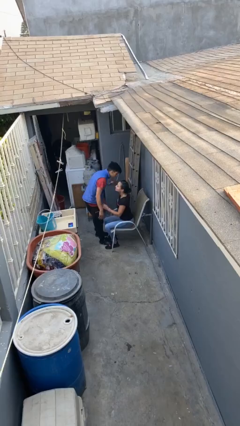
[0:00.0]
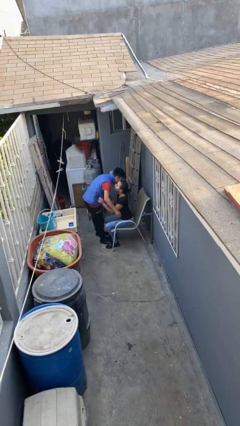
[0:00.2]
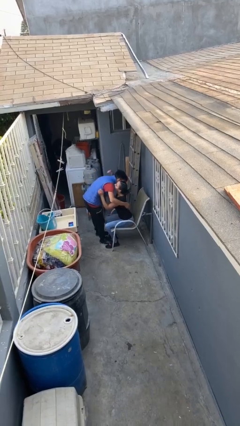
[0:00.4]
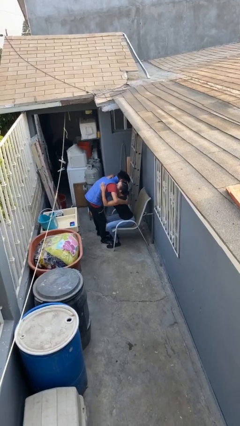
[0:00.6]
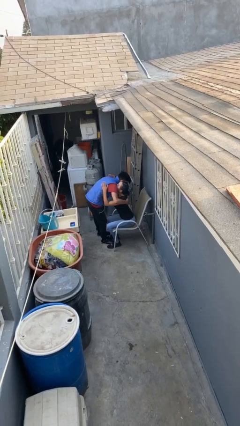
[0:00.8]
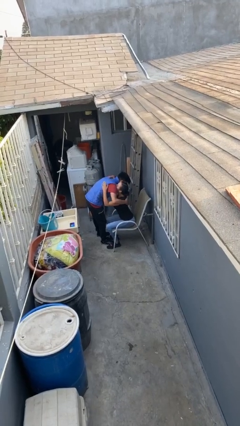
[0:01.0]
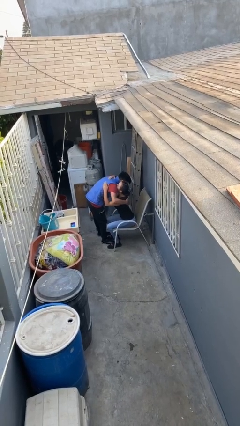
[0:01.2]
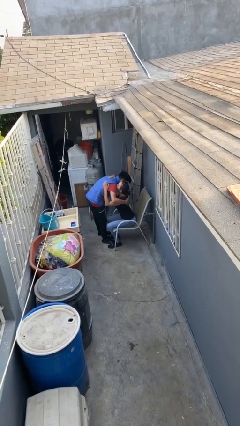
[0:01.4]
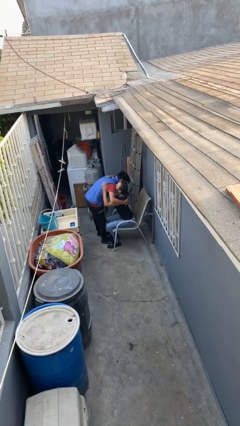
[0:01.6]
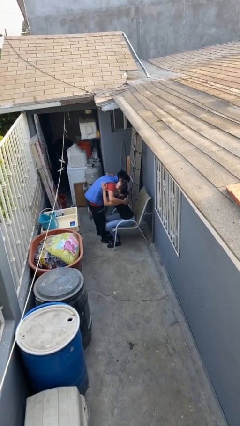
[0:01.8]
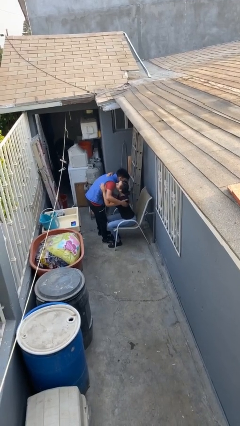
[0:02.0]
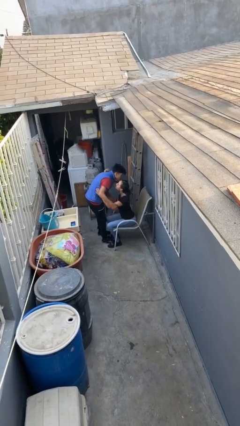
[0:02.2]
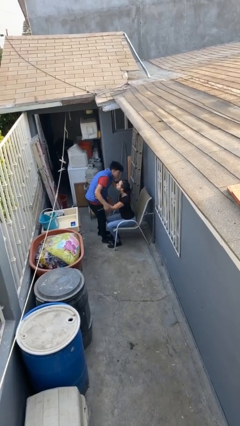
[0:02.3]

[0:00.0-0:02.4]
person embraces person

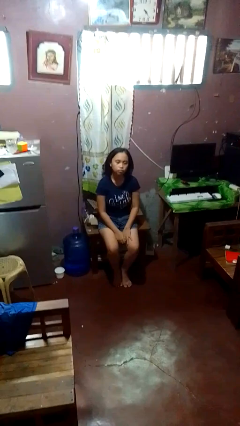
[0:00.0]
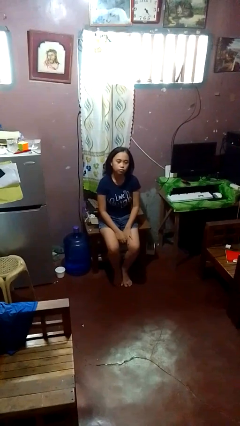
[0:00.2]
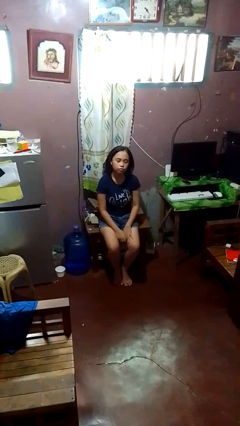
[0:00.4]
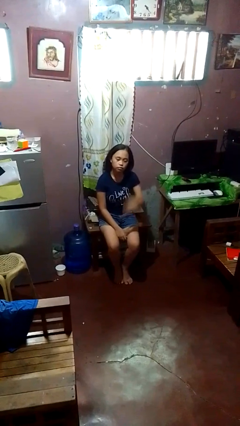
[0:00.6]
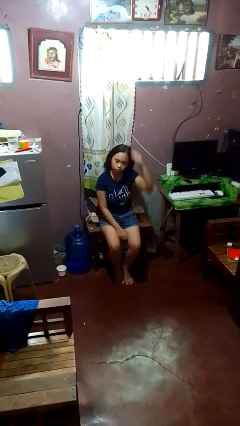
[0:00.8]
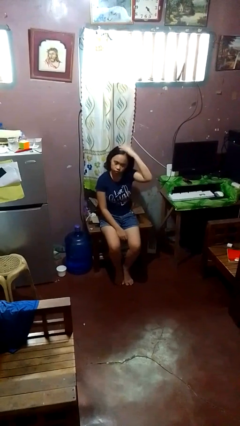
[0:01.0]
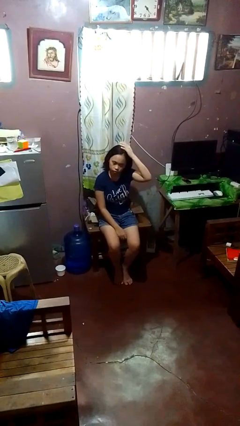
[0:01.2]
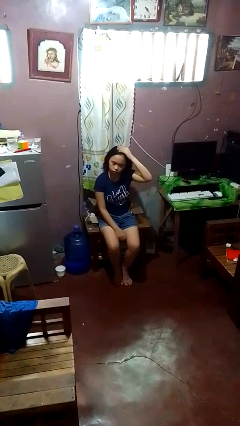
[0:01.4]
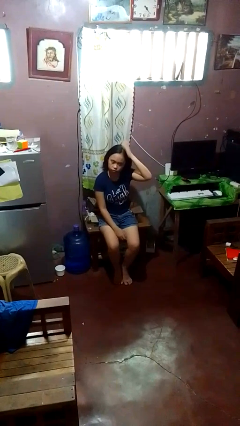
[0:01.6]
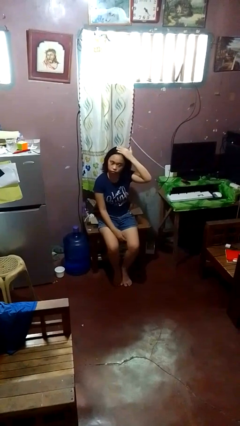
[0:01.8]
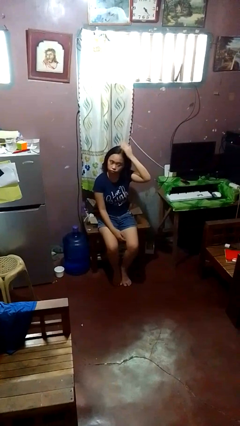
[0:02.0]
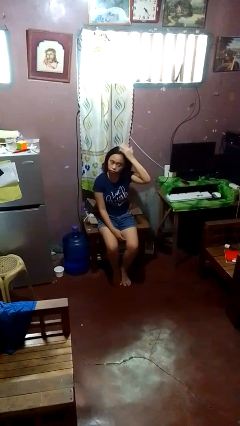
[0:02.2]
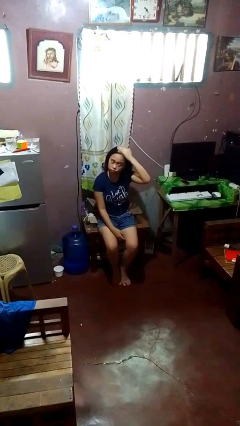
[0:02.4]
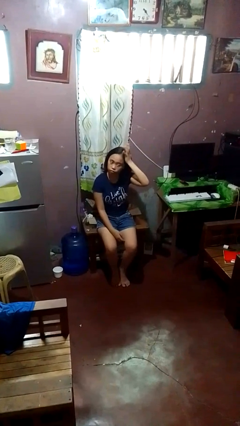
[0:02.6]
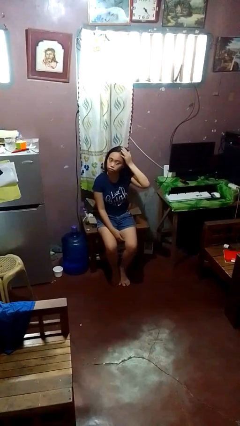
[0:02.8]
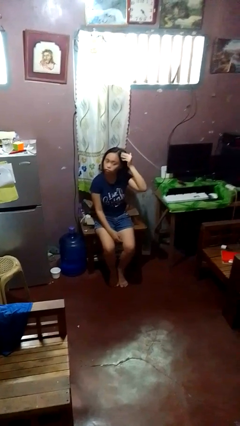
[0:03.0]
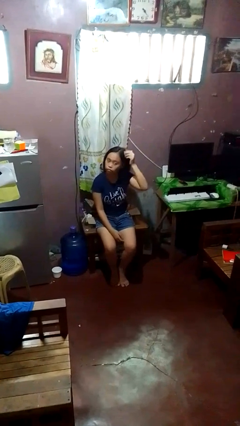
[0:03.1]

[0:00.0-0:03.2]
person pats head

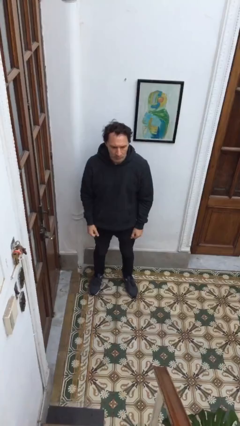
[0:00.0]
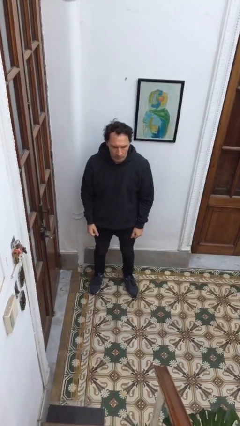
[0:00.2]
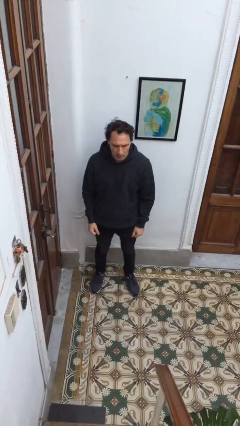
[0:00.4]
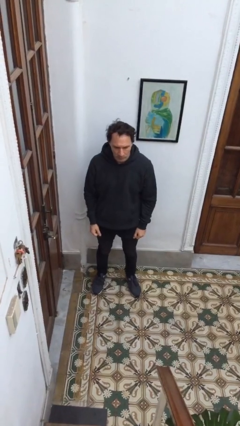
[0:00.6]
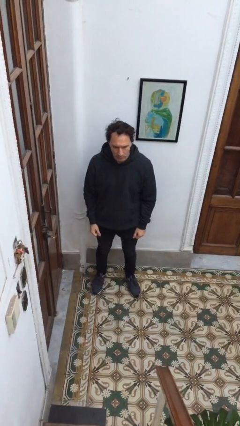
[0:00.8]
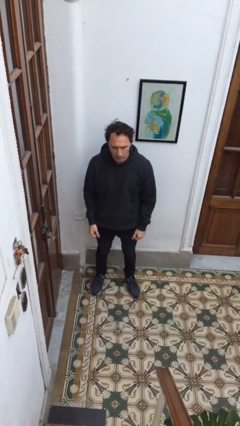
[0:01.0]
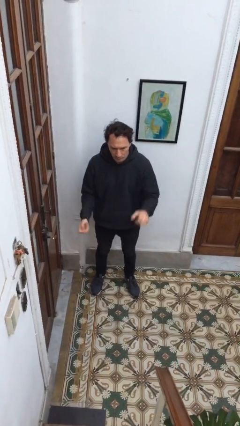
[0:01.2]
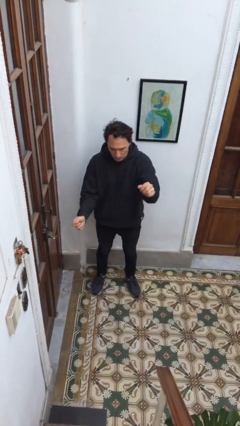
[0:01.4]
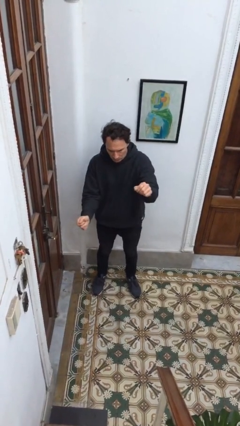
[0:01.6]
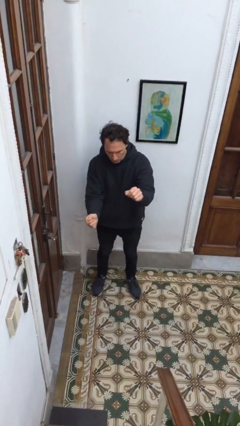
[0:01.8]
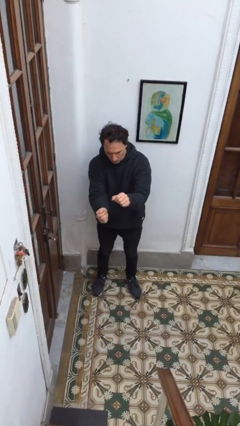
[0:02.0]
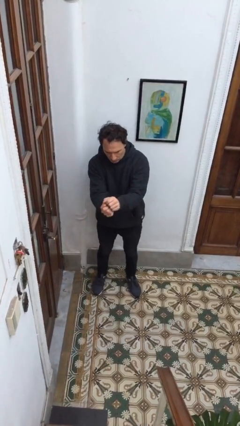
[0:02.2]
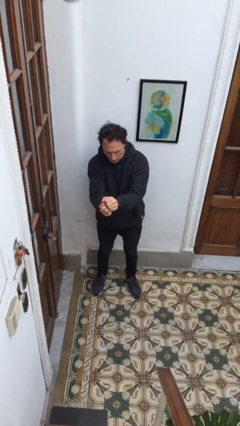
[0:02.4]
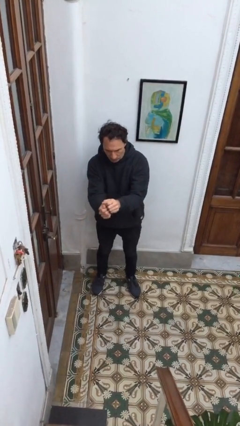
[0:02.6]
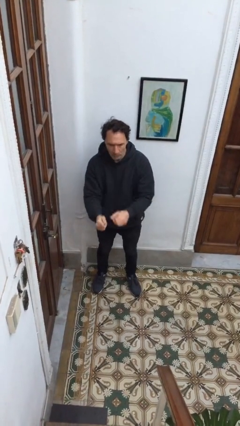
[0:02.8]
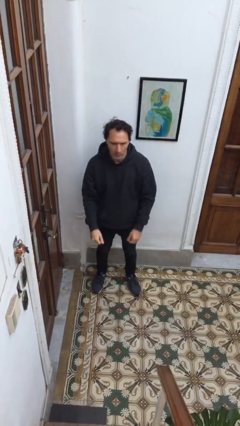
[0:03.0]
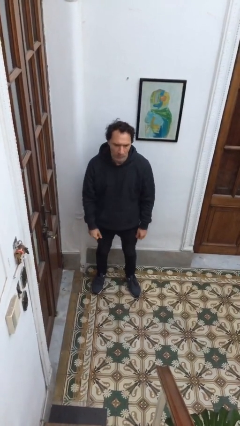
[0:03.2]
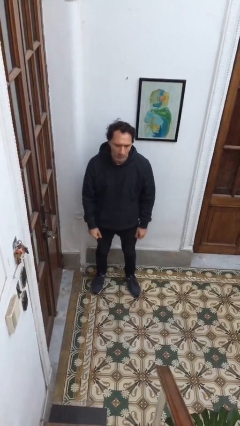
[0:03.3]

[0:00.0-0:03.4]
person gestures zoom out

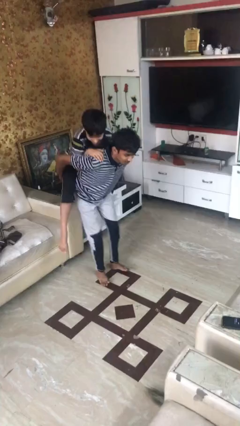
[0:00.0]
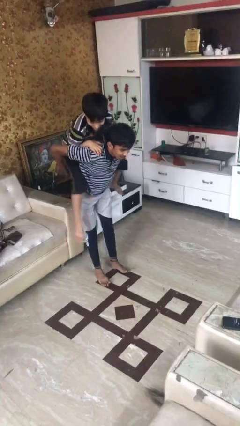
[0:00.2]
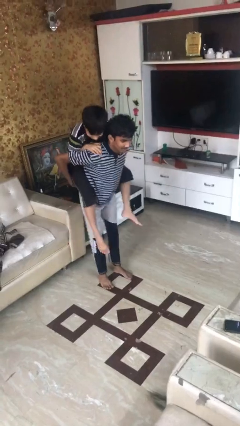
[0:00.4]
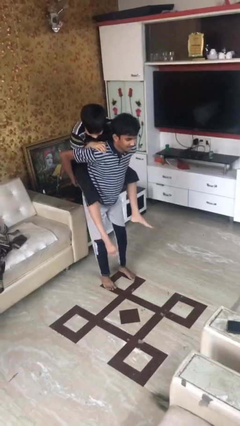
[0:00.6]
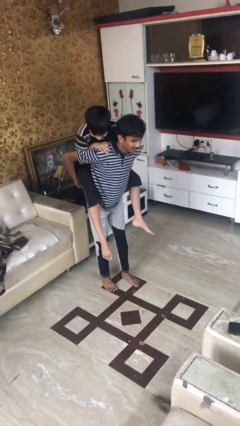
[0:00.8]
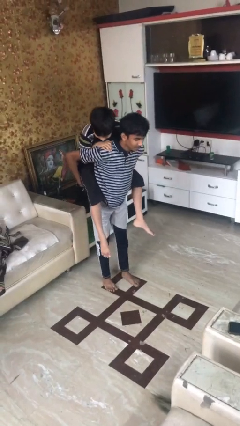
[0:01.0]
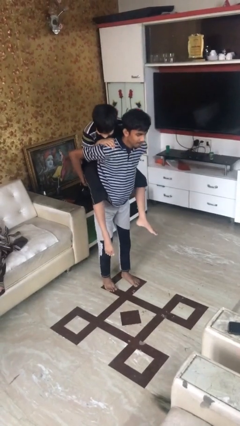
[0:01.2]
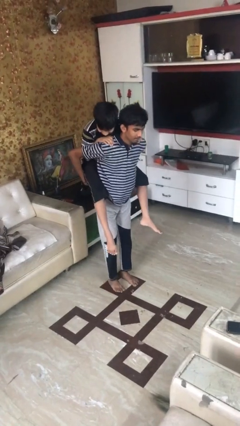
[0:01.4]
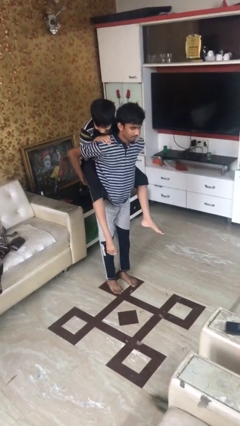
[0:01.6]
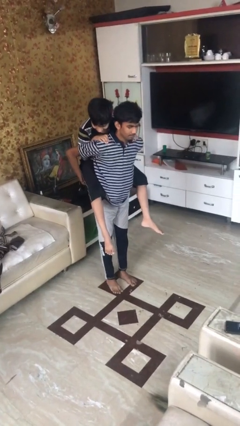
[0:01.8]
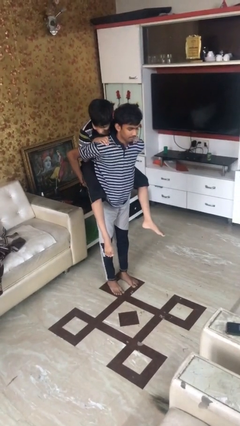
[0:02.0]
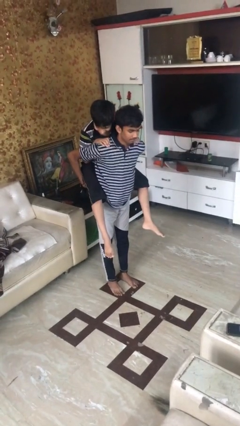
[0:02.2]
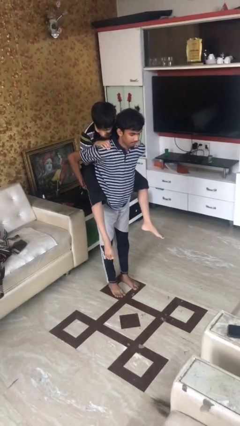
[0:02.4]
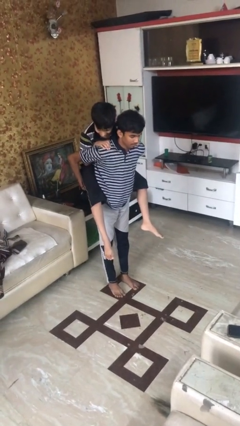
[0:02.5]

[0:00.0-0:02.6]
person carries person over shoulder

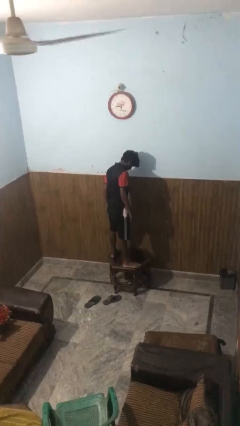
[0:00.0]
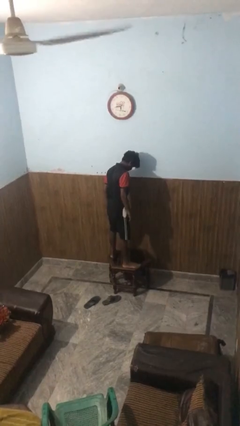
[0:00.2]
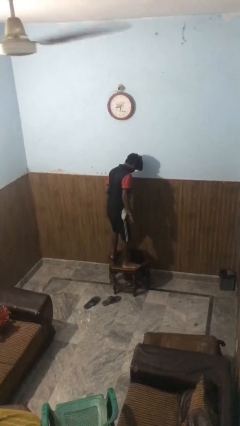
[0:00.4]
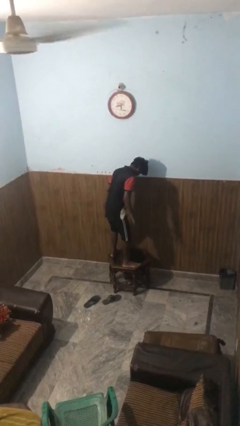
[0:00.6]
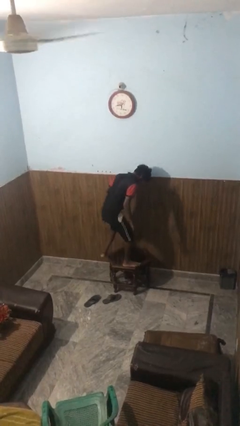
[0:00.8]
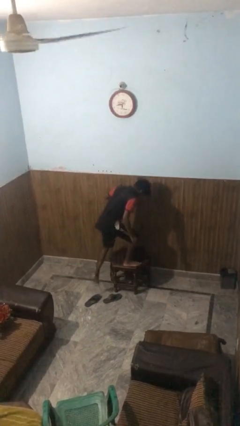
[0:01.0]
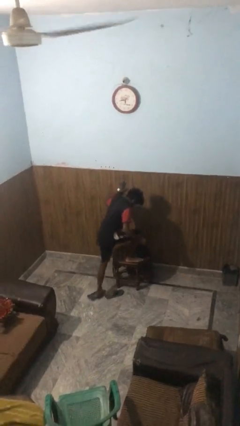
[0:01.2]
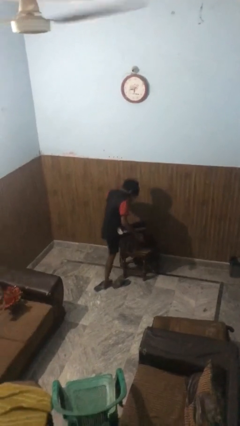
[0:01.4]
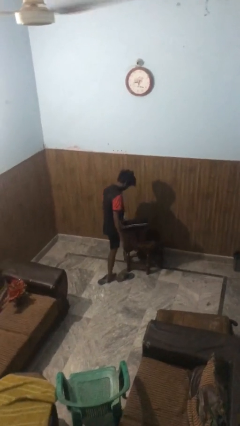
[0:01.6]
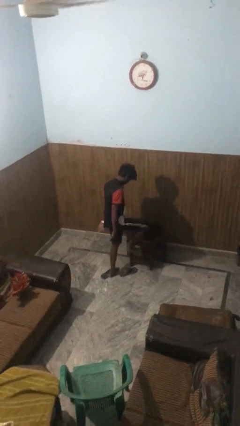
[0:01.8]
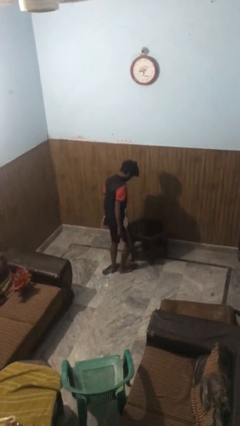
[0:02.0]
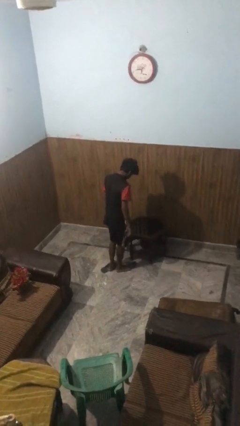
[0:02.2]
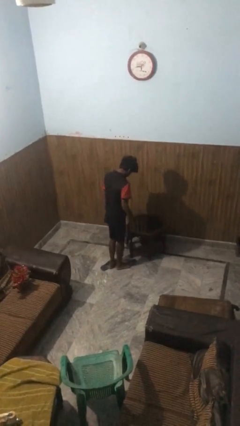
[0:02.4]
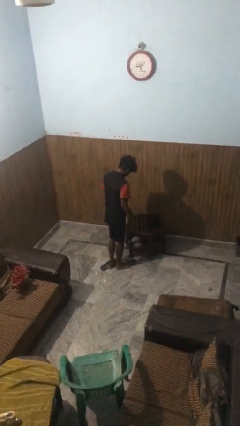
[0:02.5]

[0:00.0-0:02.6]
person climbs off table

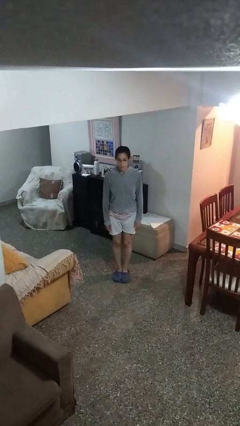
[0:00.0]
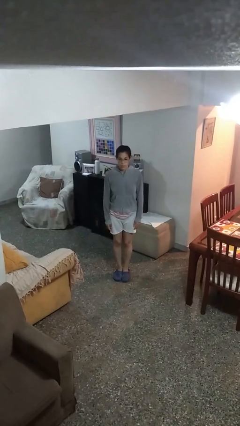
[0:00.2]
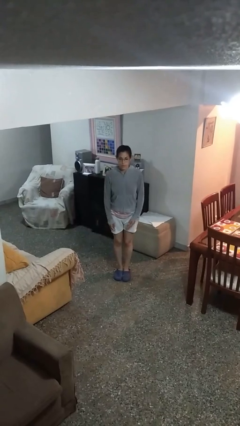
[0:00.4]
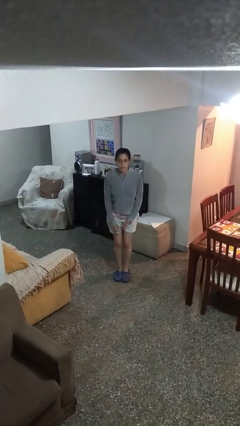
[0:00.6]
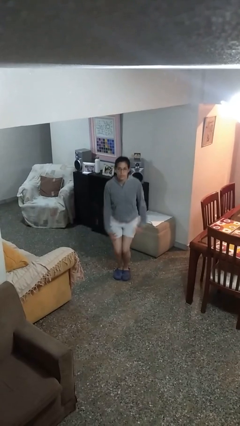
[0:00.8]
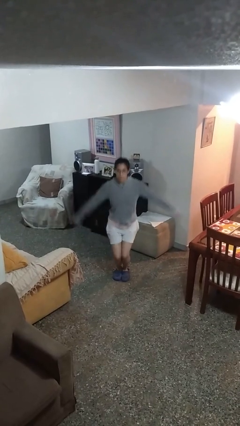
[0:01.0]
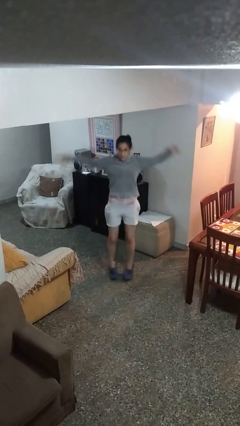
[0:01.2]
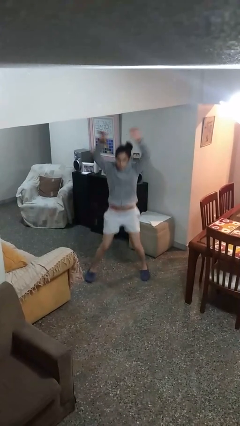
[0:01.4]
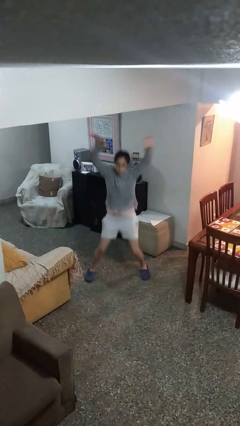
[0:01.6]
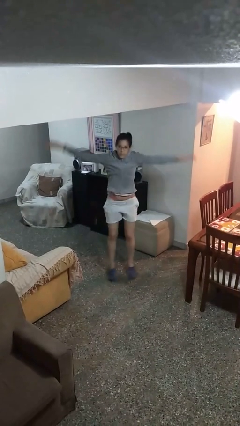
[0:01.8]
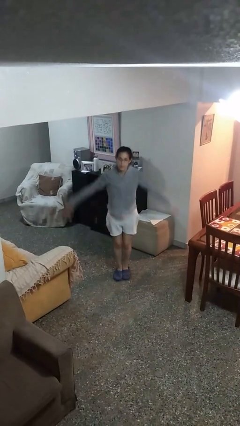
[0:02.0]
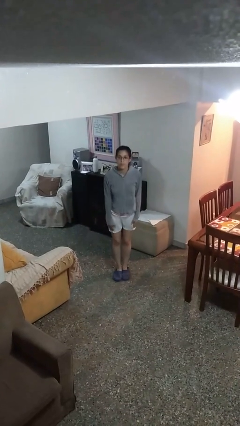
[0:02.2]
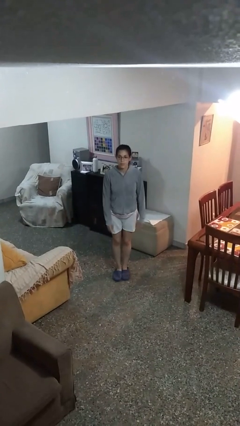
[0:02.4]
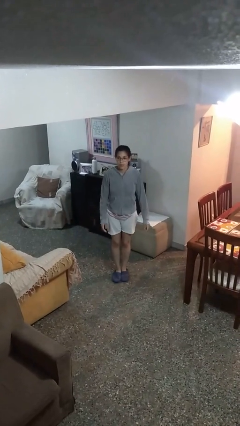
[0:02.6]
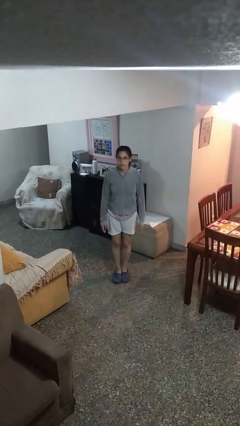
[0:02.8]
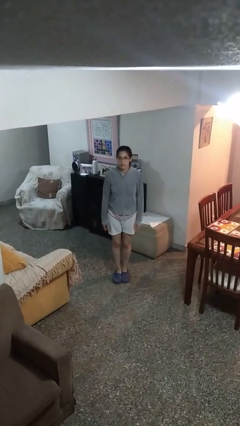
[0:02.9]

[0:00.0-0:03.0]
person exercises with jumping jacks
